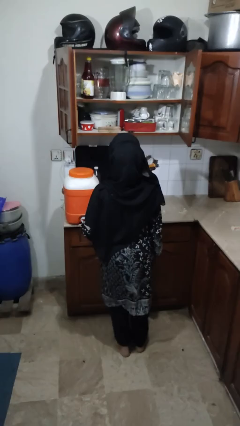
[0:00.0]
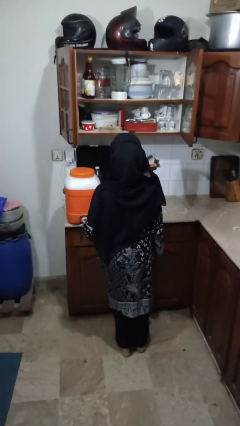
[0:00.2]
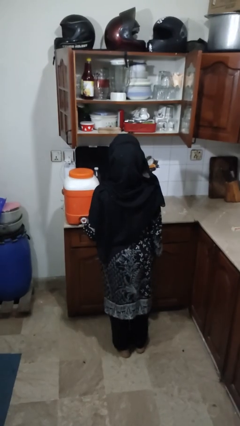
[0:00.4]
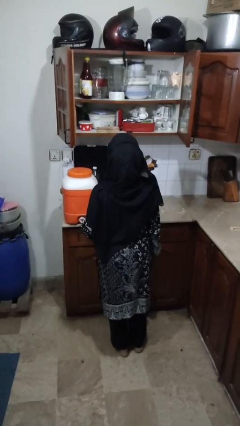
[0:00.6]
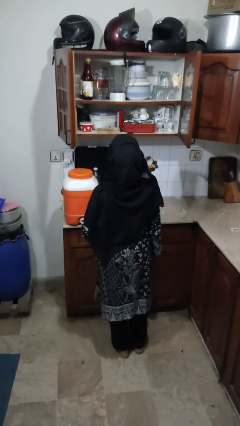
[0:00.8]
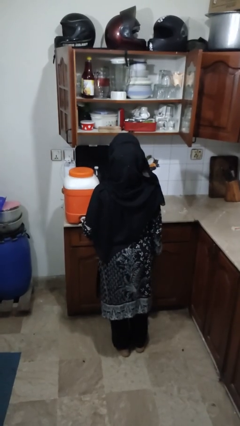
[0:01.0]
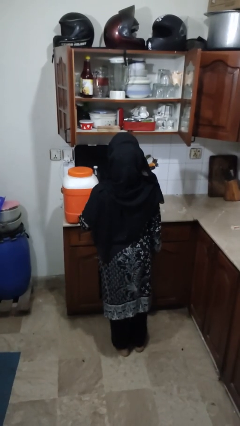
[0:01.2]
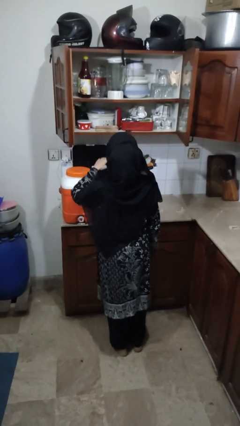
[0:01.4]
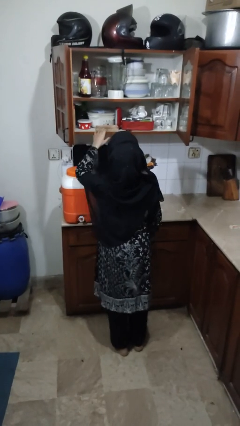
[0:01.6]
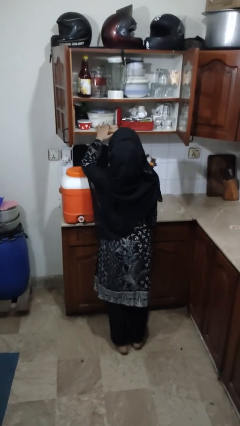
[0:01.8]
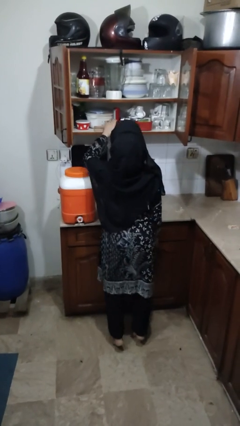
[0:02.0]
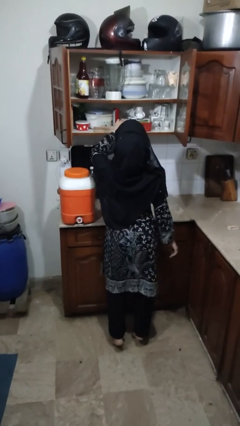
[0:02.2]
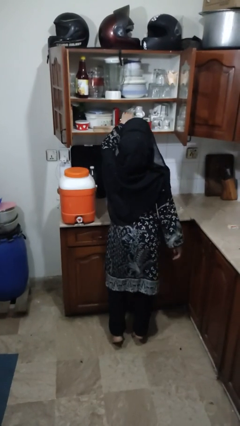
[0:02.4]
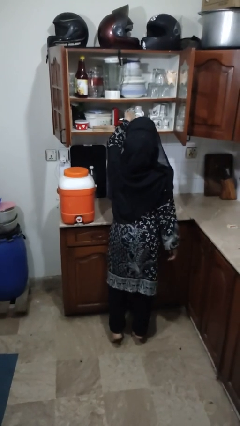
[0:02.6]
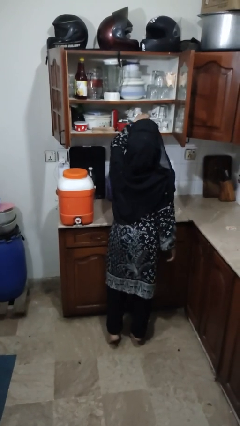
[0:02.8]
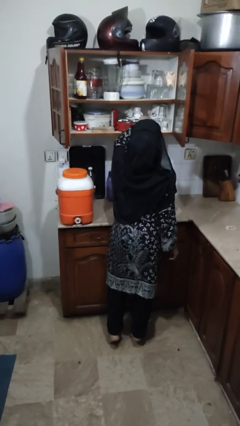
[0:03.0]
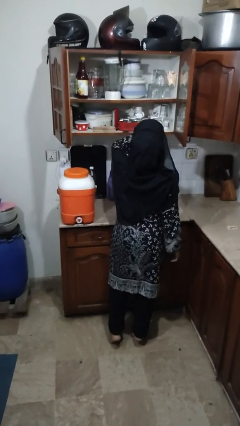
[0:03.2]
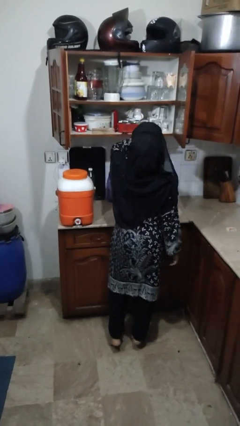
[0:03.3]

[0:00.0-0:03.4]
person searches in cabinet

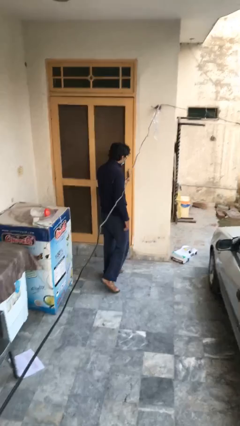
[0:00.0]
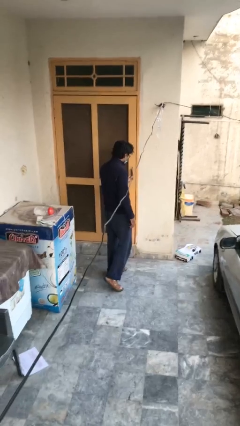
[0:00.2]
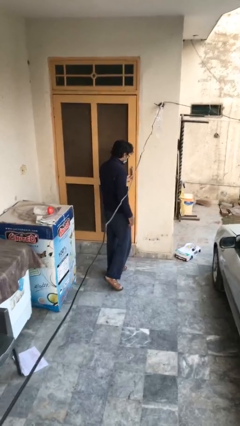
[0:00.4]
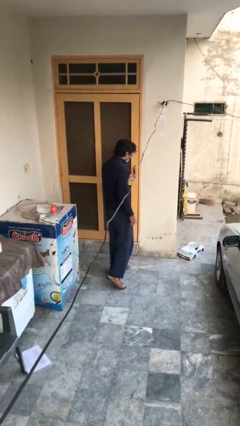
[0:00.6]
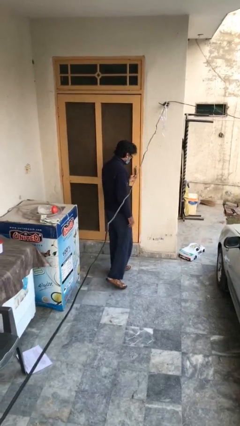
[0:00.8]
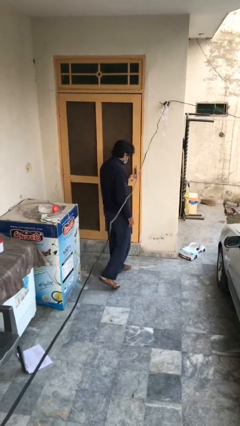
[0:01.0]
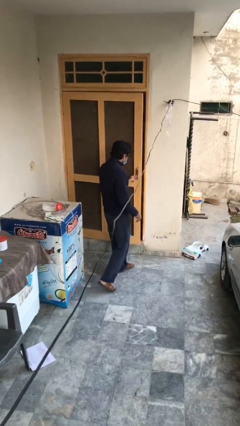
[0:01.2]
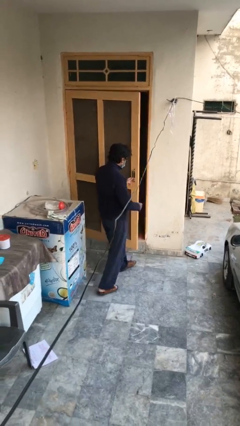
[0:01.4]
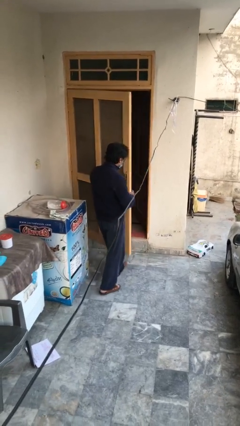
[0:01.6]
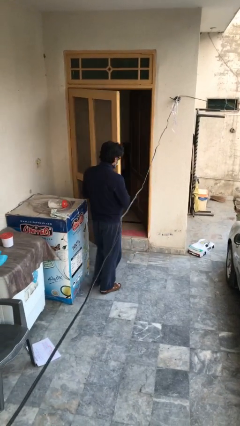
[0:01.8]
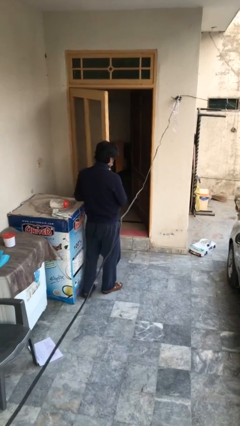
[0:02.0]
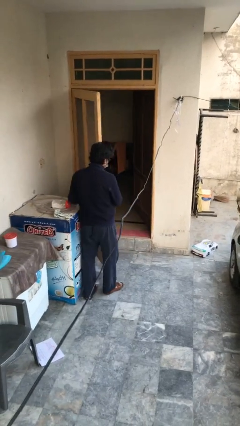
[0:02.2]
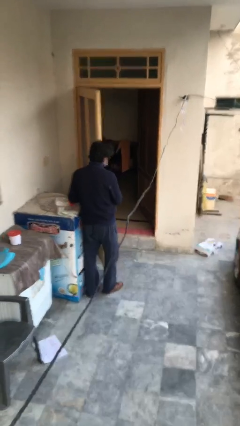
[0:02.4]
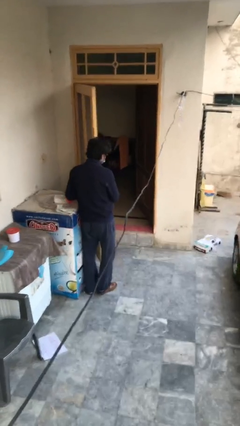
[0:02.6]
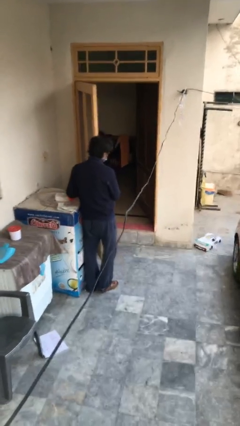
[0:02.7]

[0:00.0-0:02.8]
person opens facility door

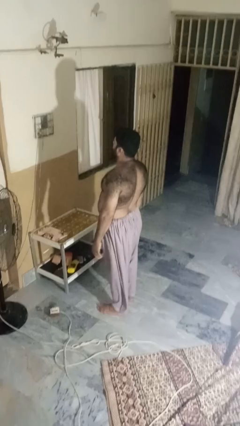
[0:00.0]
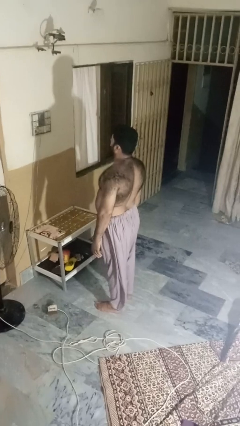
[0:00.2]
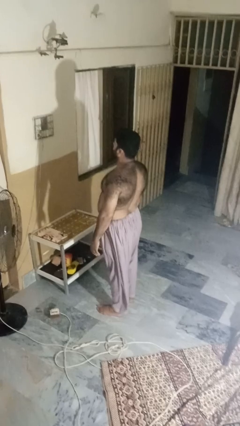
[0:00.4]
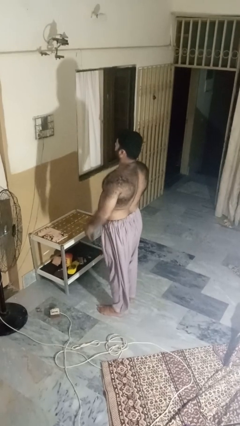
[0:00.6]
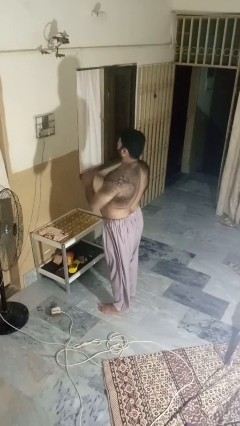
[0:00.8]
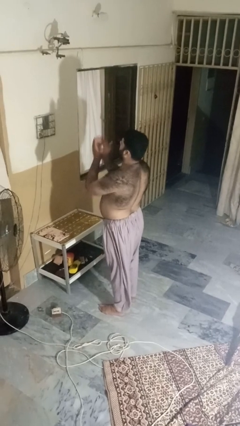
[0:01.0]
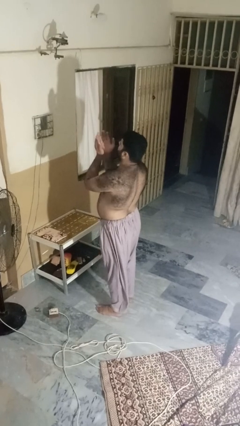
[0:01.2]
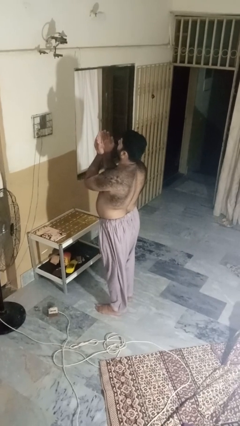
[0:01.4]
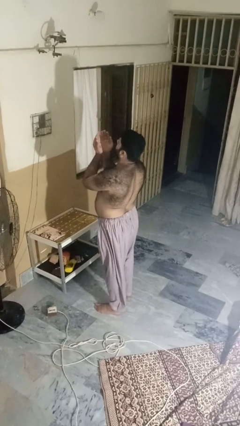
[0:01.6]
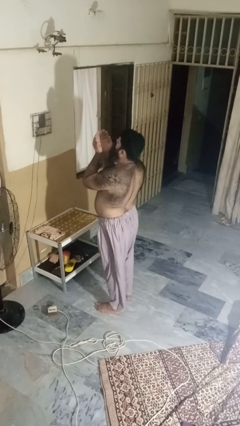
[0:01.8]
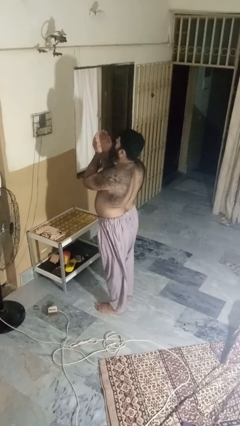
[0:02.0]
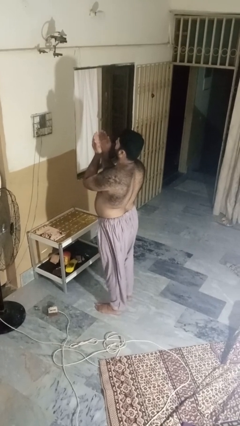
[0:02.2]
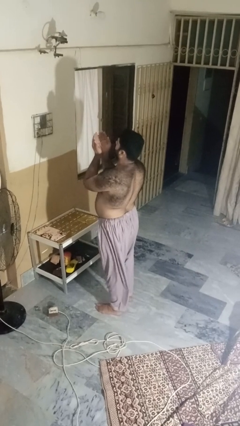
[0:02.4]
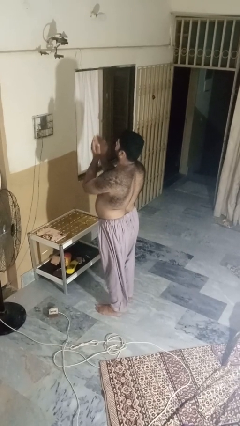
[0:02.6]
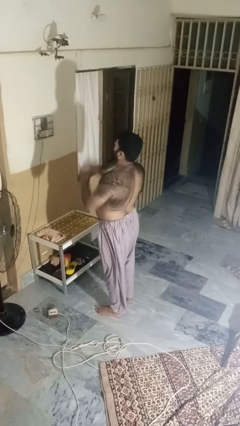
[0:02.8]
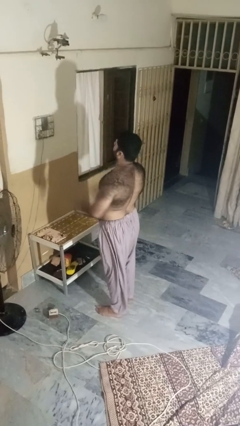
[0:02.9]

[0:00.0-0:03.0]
person prays

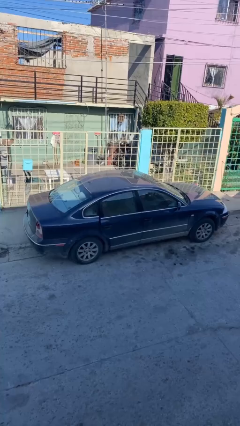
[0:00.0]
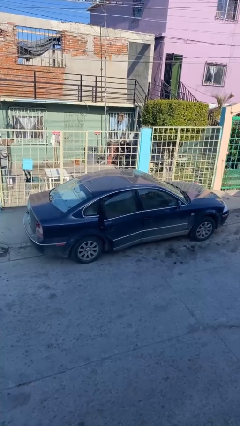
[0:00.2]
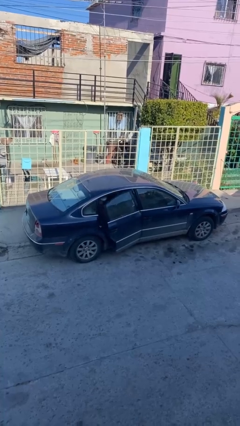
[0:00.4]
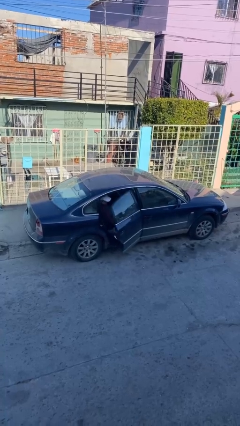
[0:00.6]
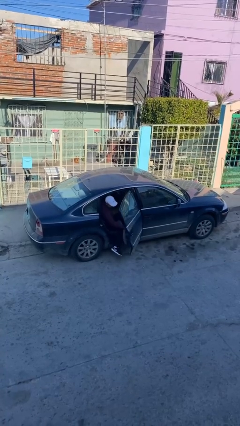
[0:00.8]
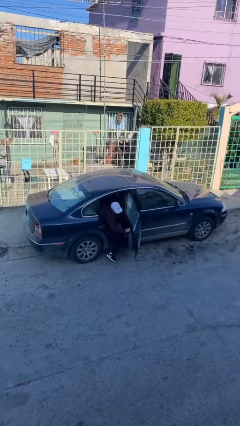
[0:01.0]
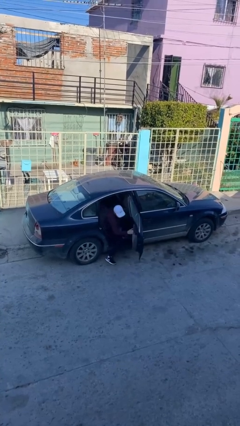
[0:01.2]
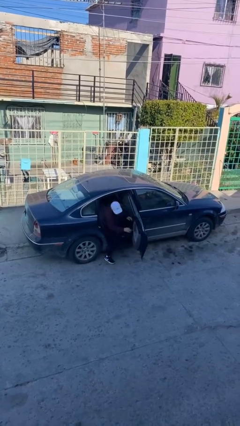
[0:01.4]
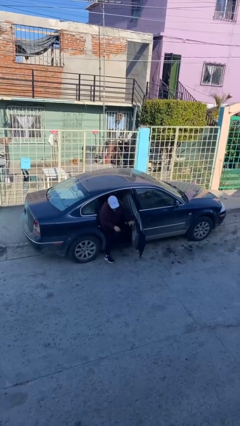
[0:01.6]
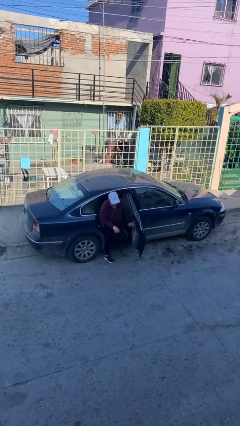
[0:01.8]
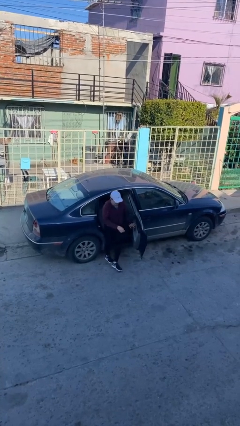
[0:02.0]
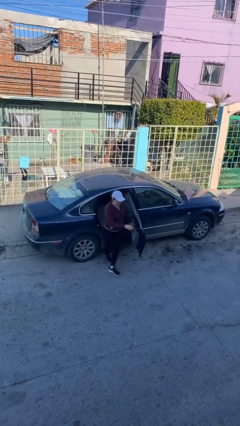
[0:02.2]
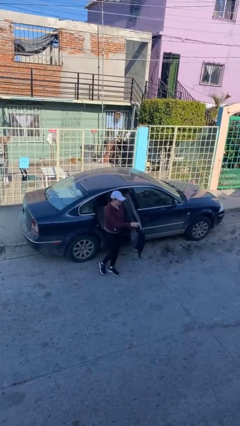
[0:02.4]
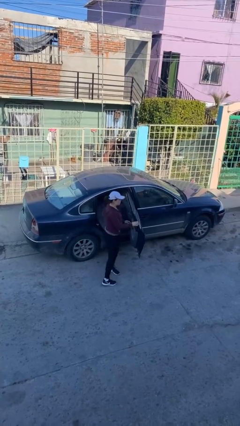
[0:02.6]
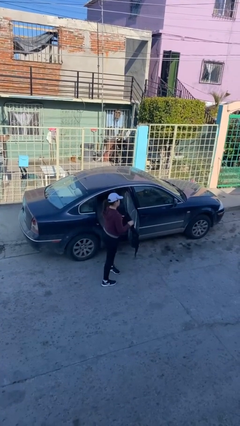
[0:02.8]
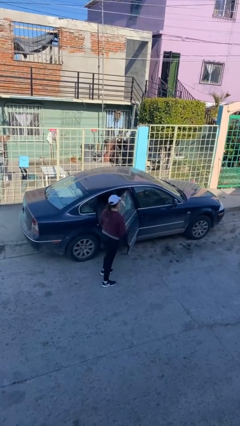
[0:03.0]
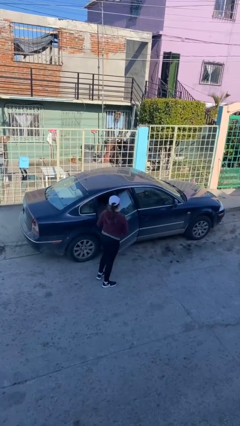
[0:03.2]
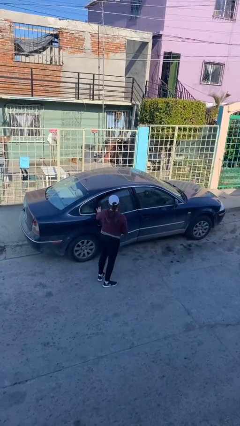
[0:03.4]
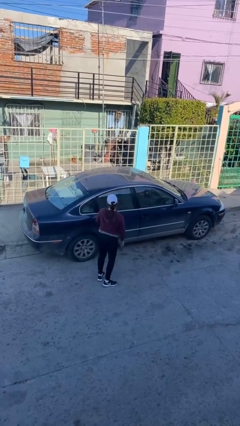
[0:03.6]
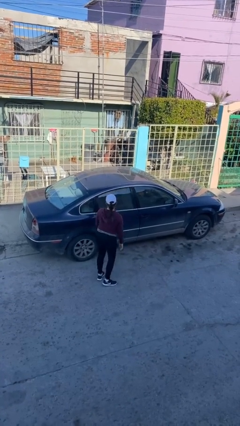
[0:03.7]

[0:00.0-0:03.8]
car drops off person

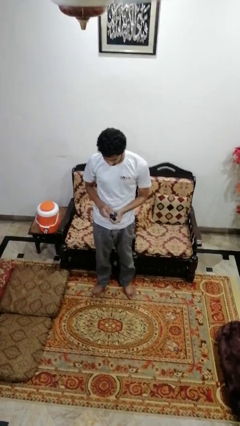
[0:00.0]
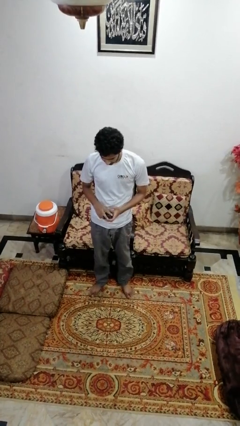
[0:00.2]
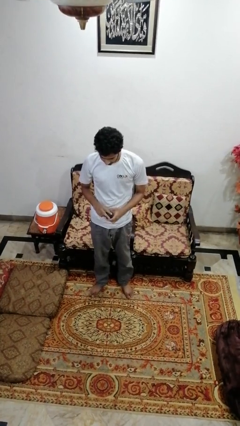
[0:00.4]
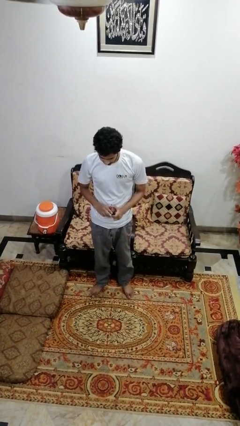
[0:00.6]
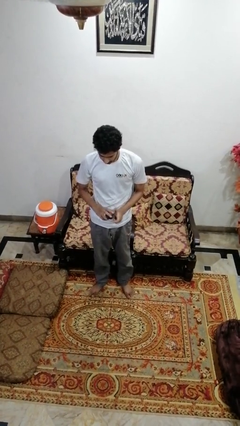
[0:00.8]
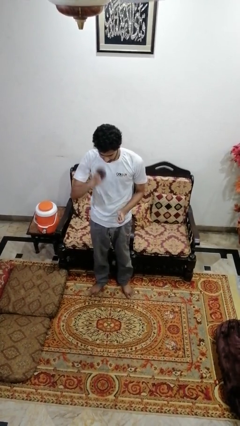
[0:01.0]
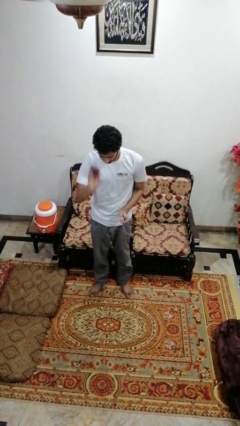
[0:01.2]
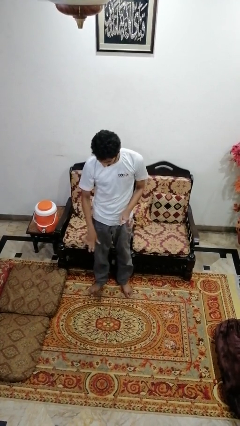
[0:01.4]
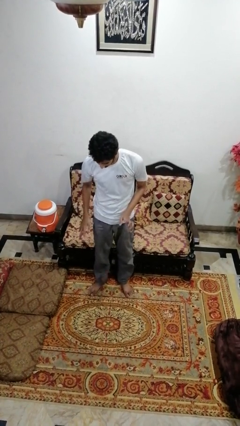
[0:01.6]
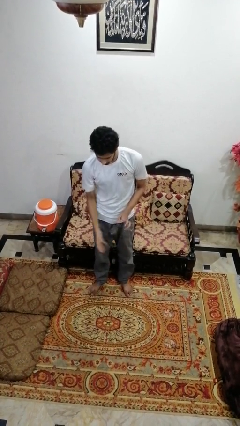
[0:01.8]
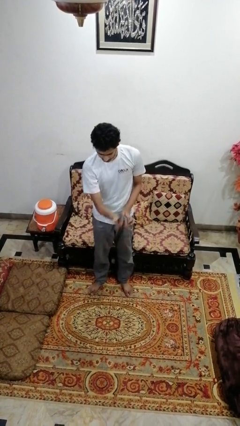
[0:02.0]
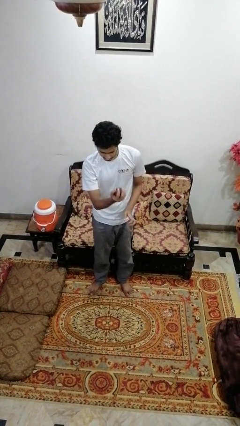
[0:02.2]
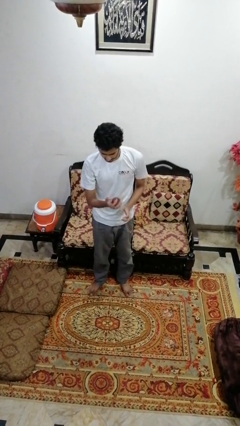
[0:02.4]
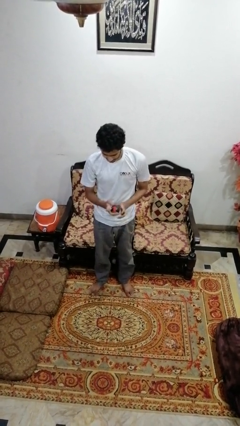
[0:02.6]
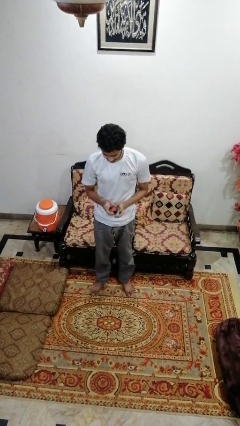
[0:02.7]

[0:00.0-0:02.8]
person bounces ball on floor

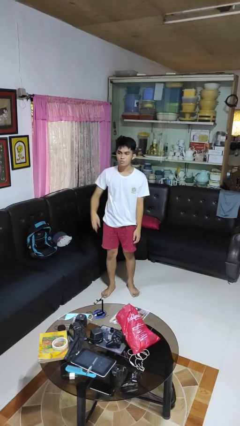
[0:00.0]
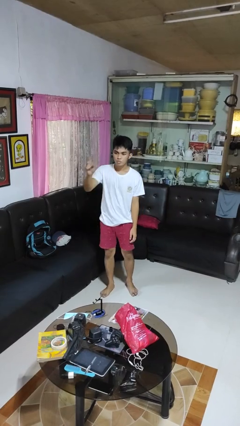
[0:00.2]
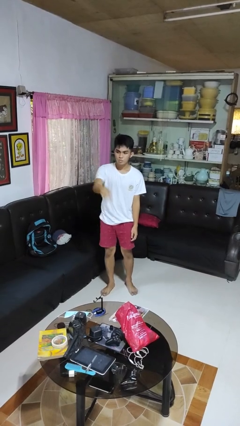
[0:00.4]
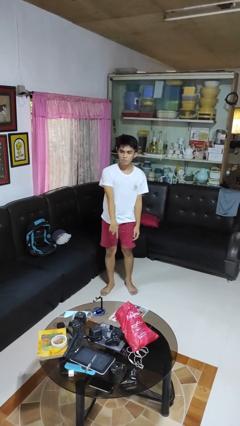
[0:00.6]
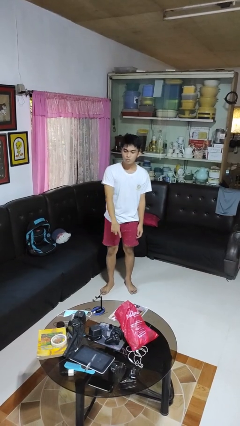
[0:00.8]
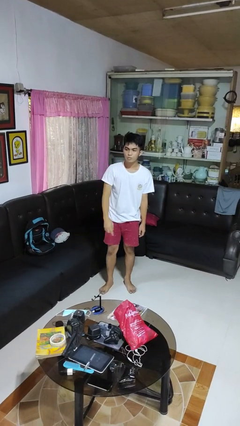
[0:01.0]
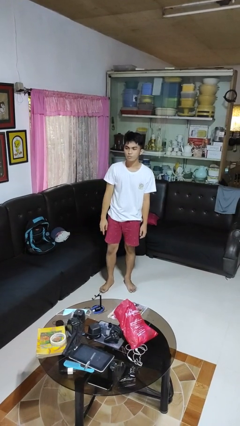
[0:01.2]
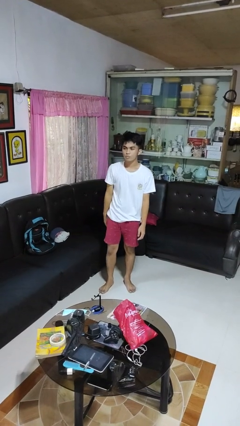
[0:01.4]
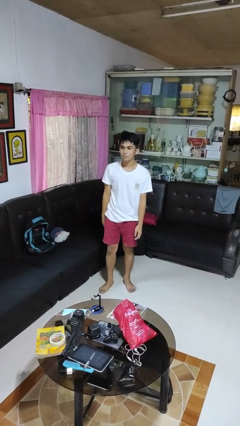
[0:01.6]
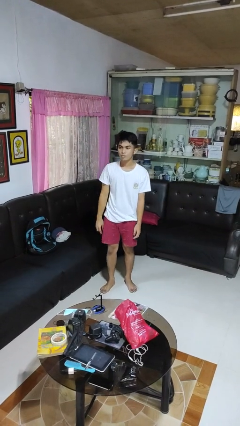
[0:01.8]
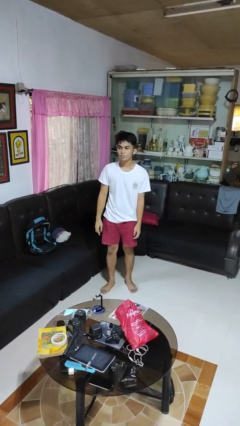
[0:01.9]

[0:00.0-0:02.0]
person gestures swipe down
